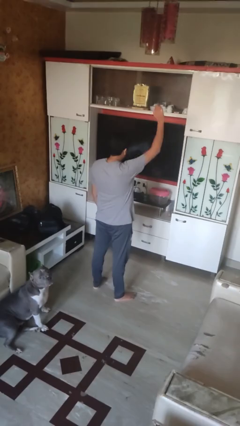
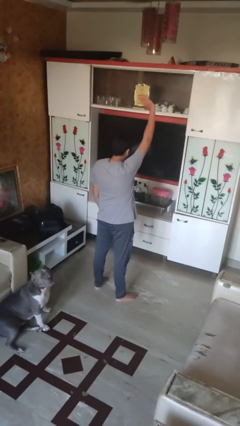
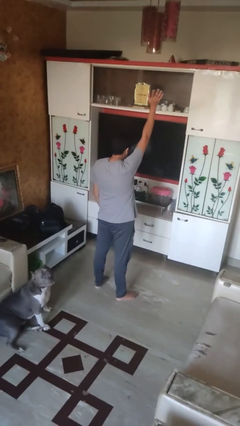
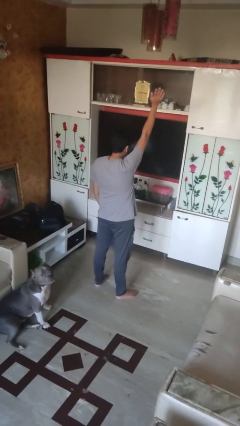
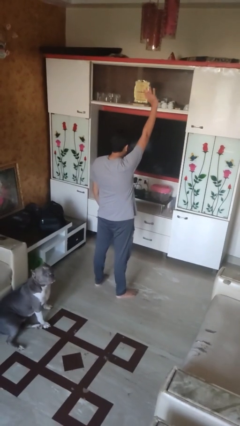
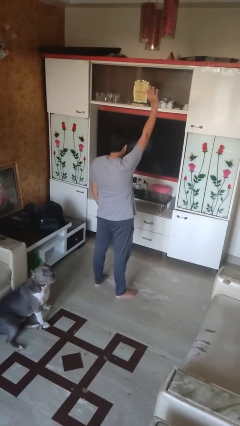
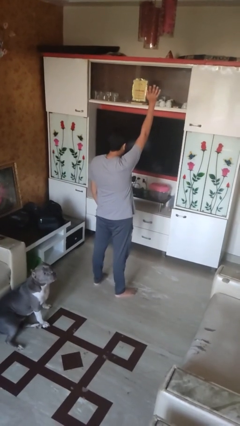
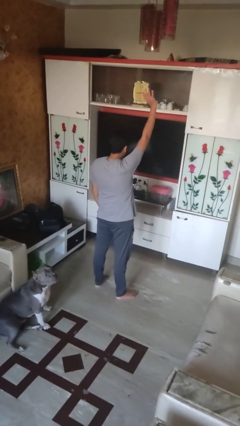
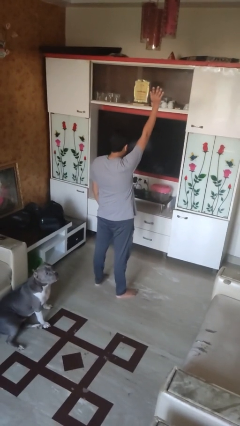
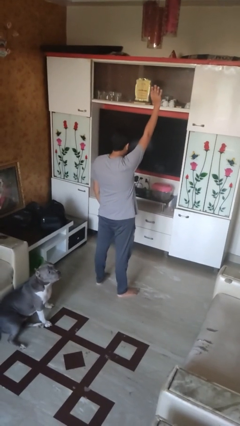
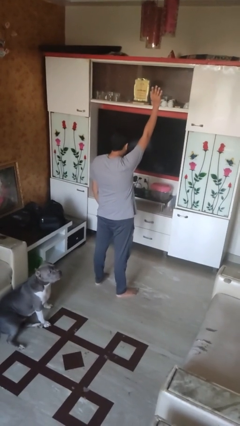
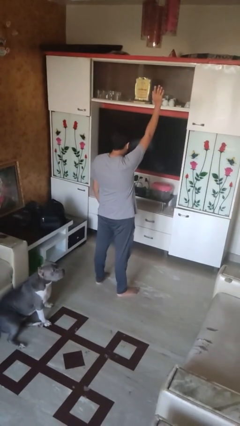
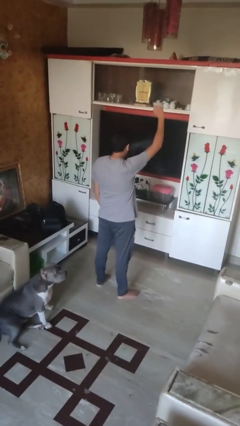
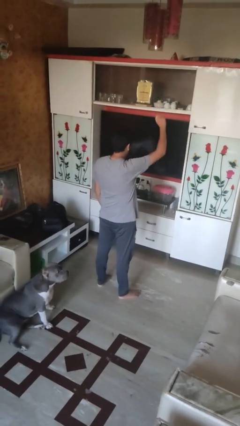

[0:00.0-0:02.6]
person waves at person

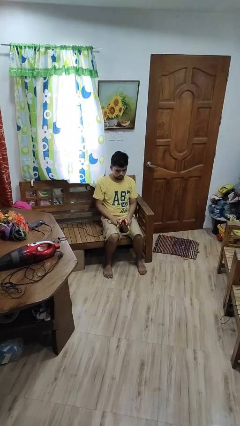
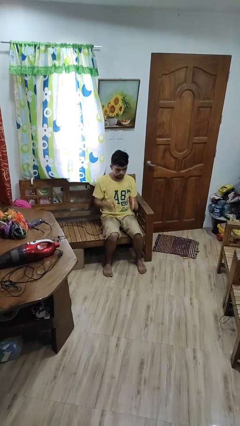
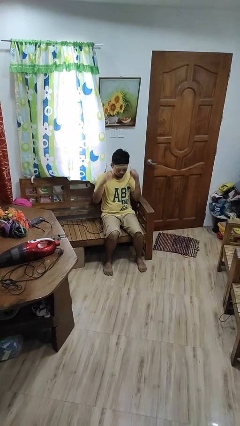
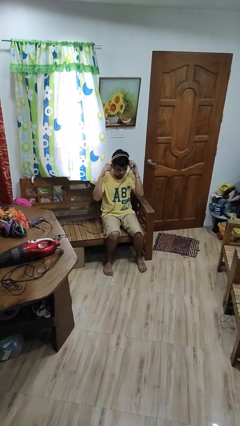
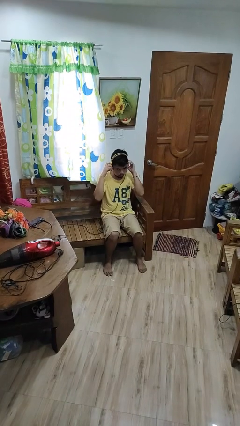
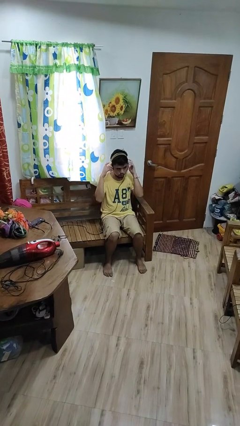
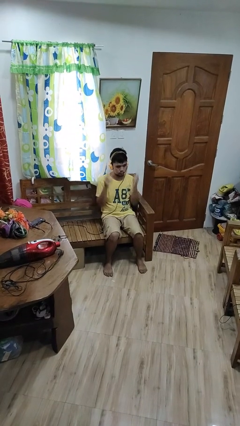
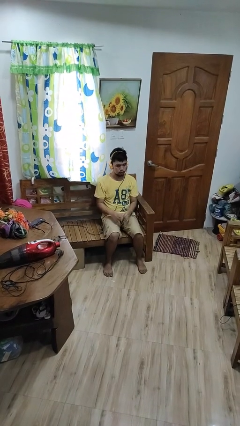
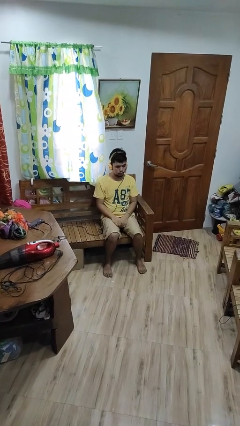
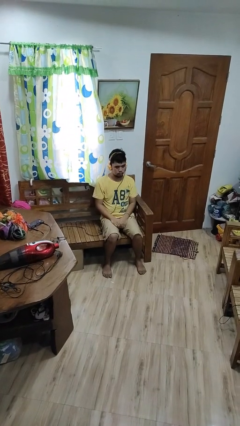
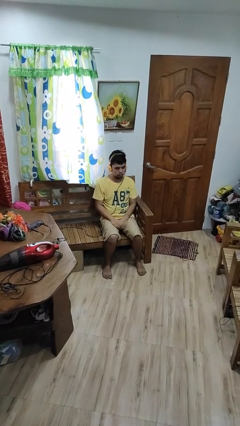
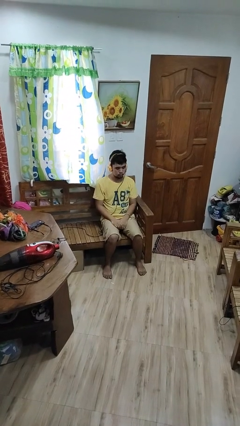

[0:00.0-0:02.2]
person puts on headphones

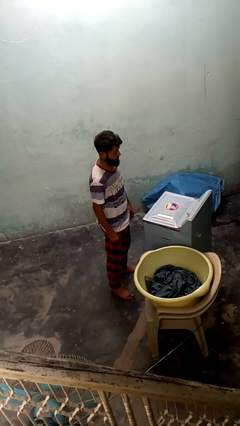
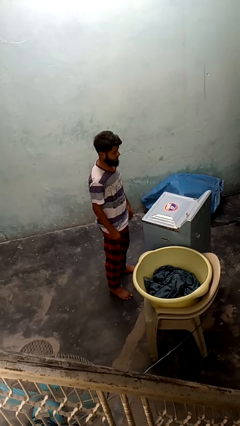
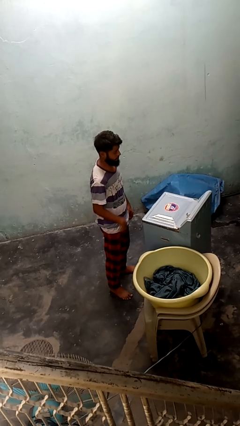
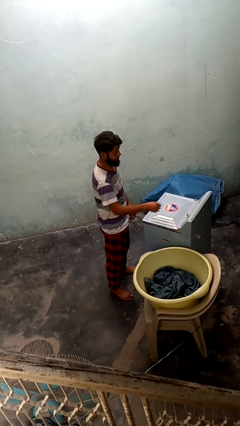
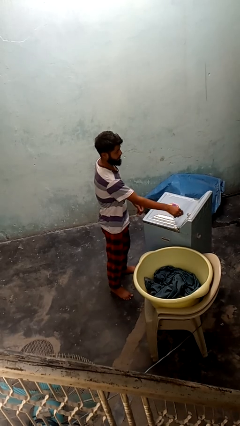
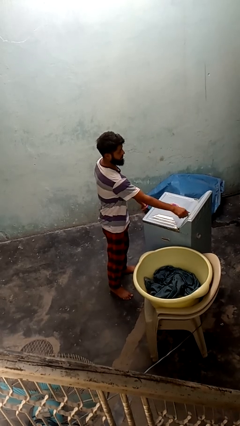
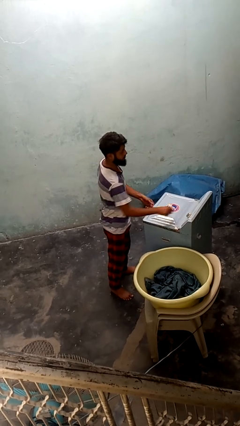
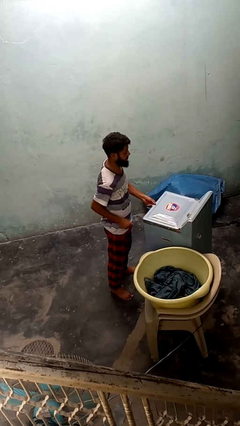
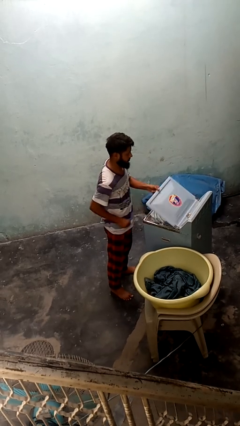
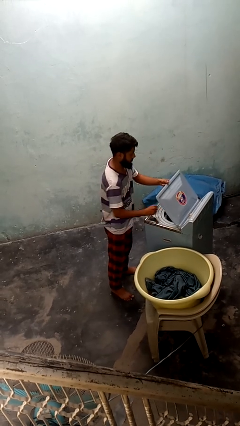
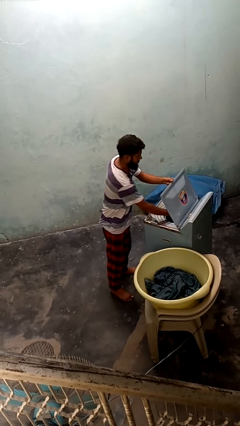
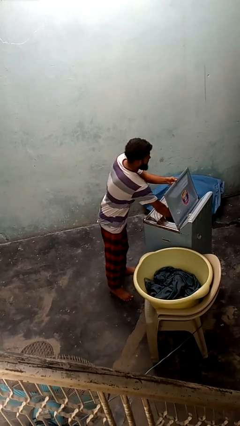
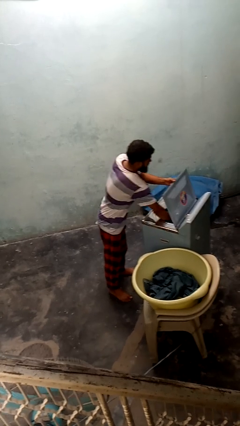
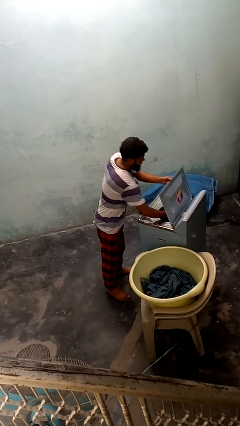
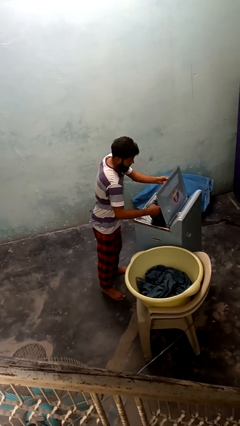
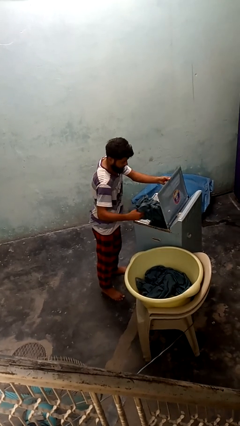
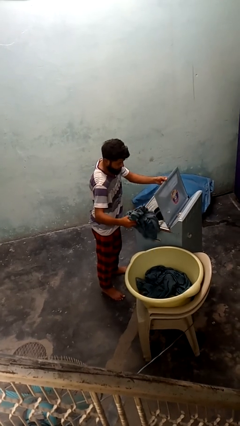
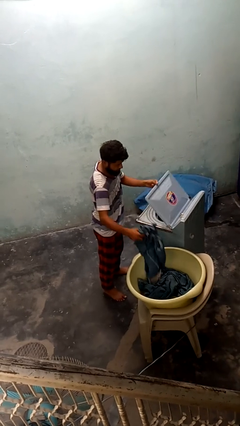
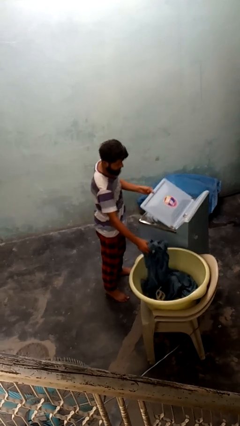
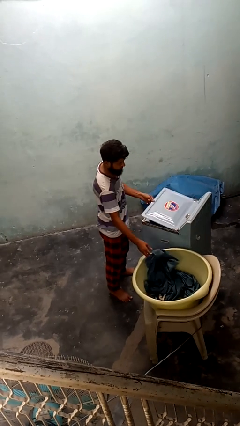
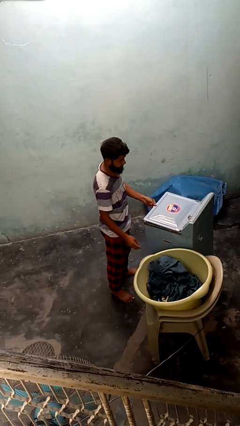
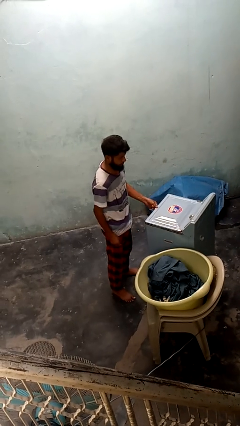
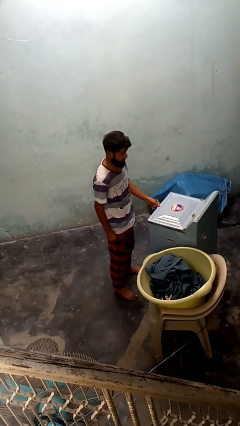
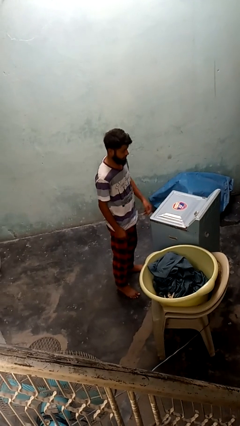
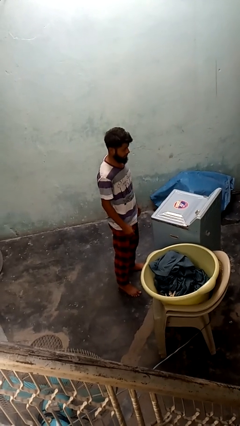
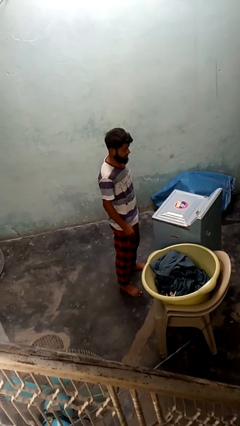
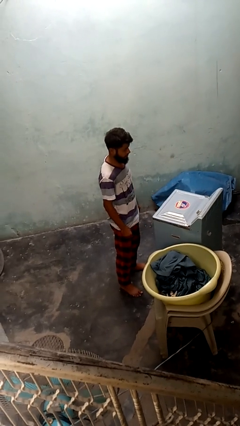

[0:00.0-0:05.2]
person unloads dryer

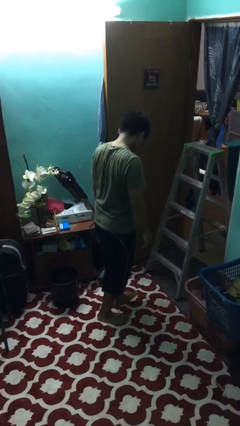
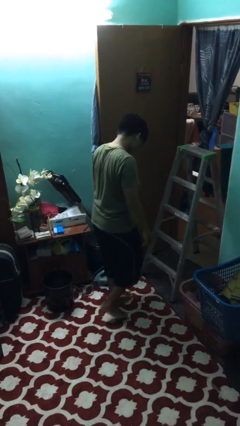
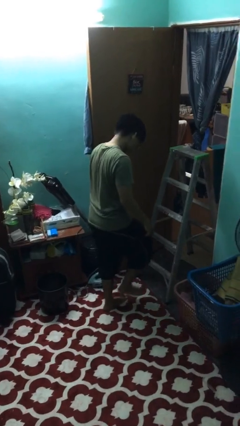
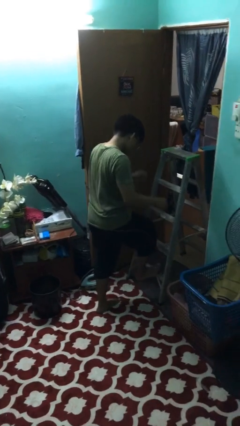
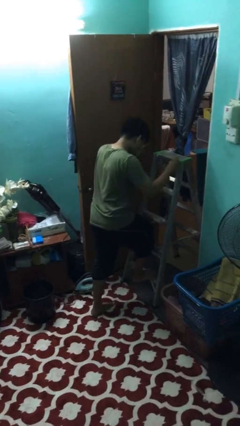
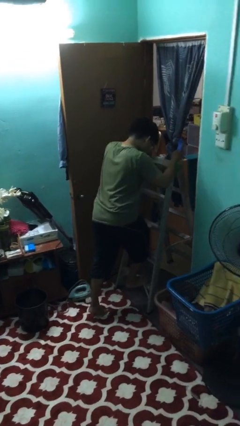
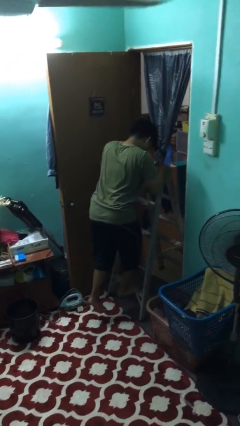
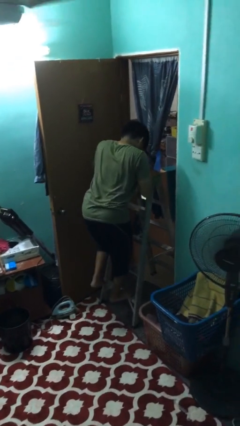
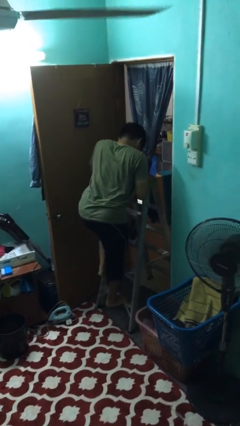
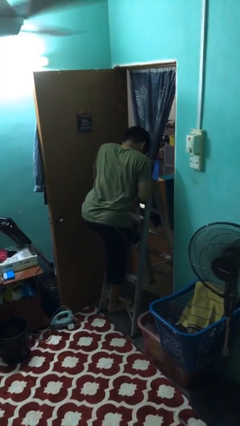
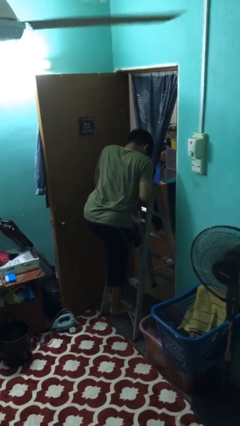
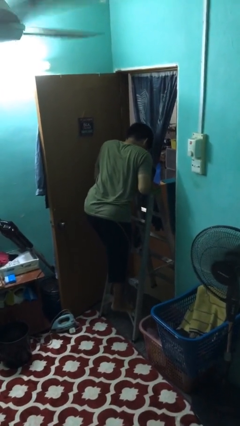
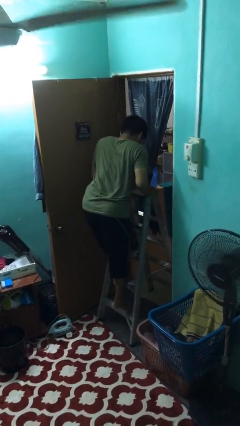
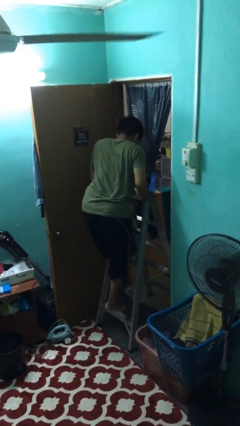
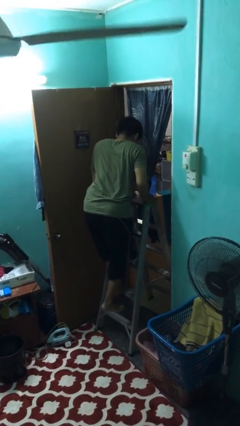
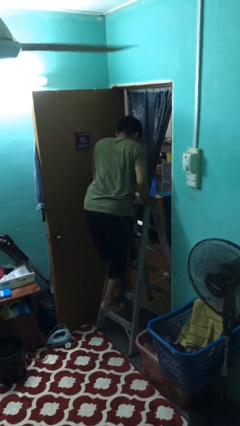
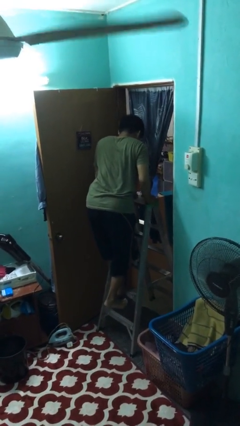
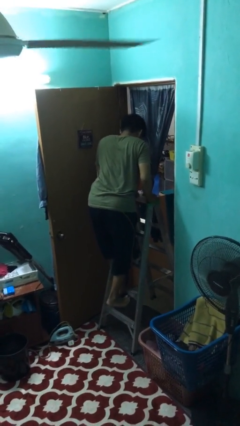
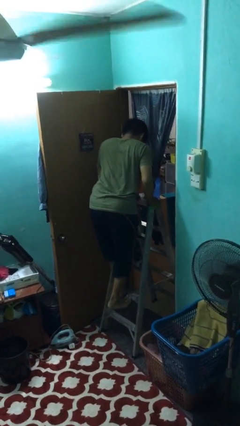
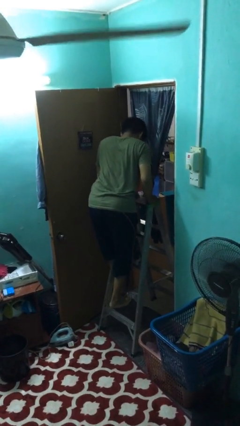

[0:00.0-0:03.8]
person climbs up ladder

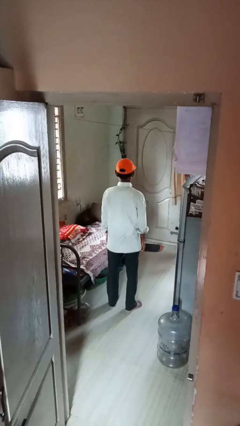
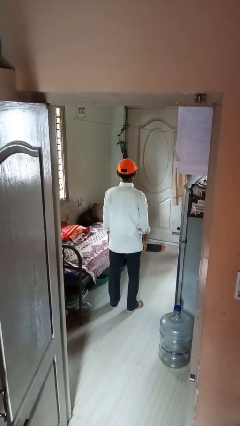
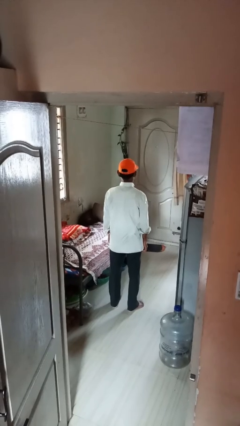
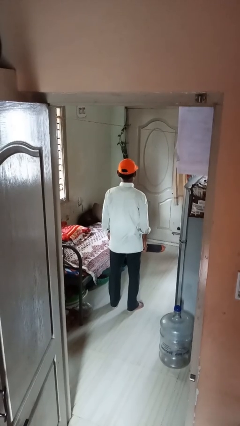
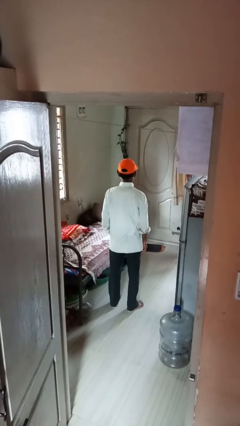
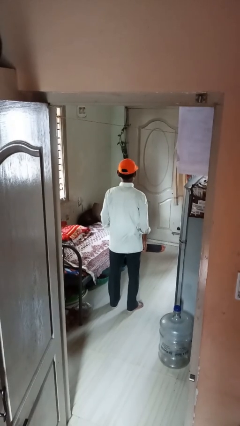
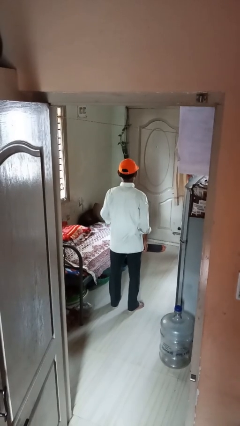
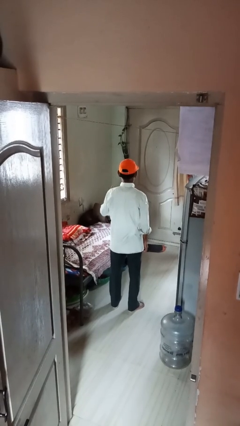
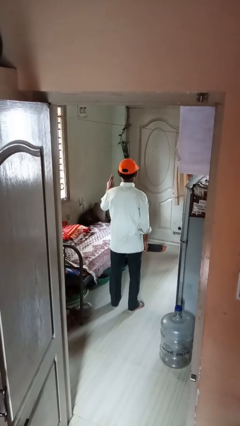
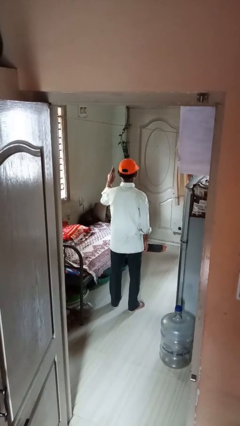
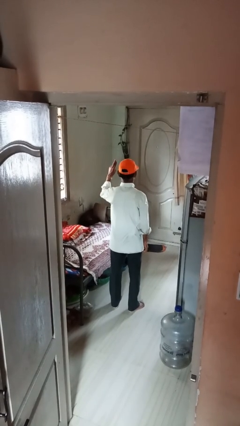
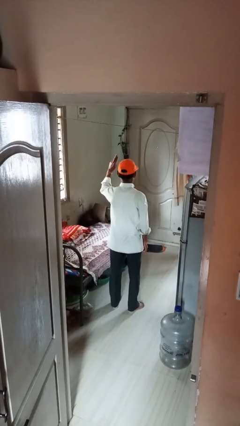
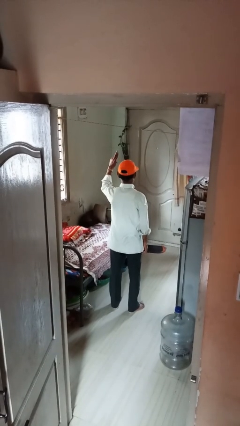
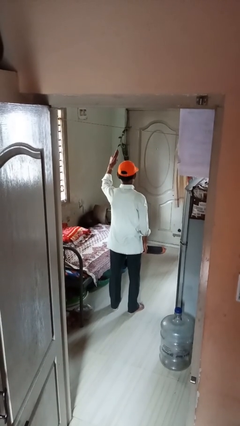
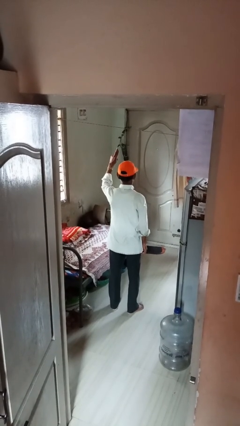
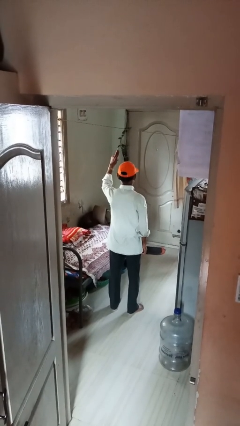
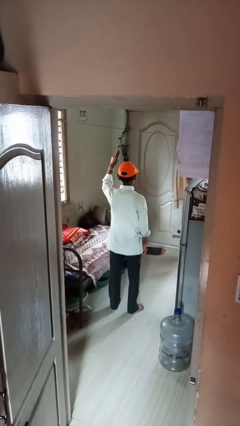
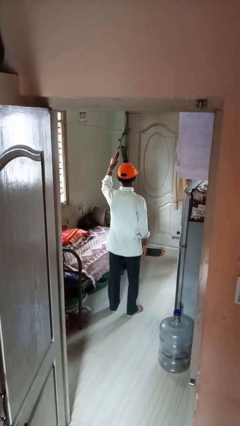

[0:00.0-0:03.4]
person gestures swipe up

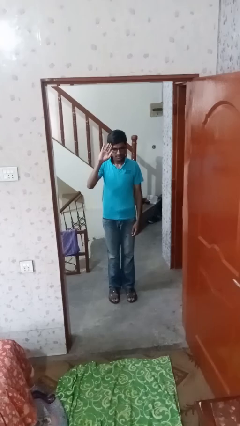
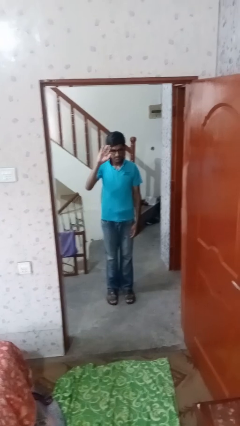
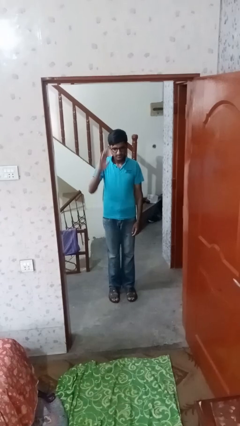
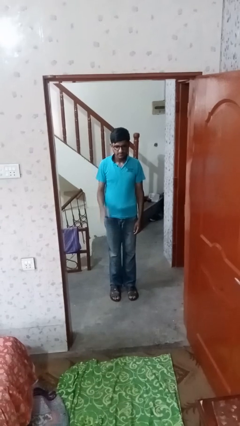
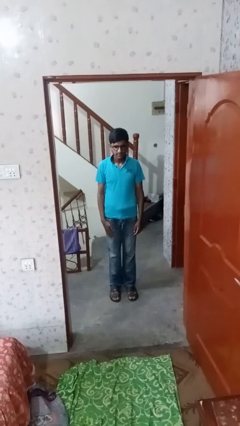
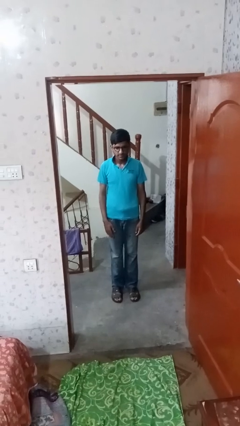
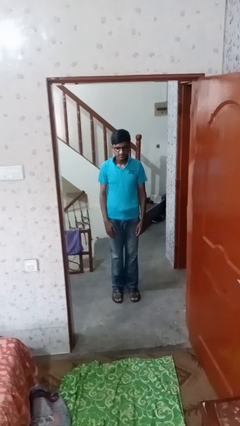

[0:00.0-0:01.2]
person salutes
